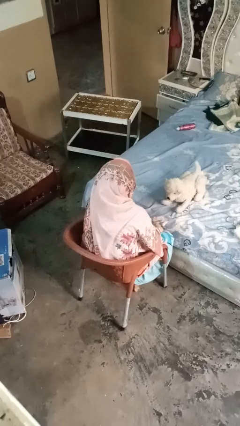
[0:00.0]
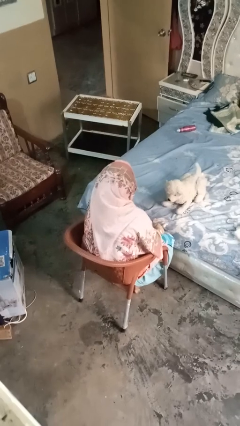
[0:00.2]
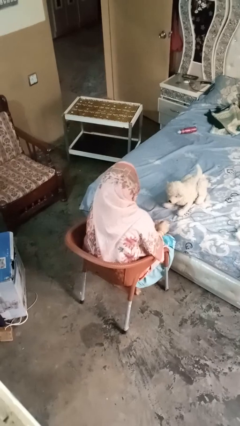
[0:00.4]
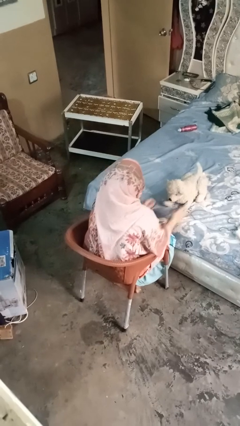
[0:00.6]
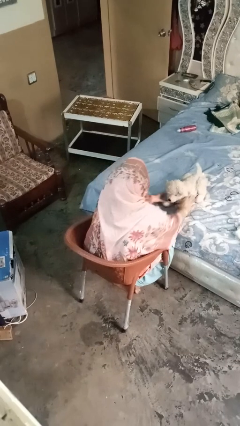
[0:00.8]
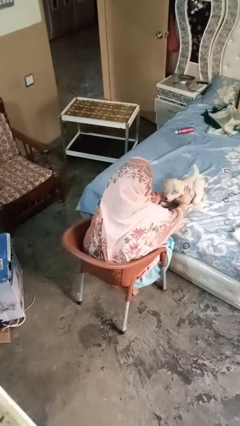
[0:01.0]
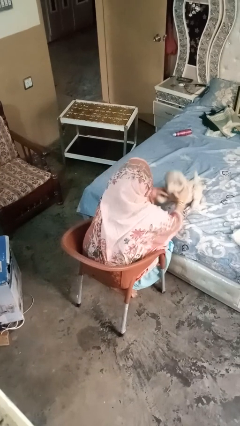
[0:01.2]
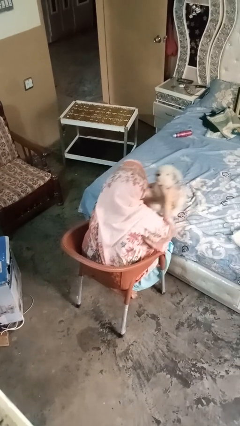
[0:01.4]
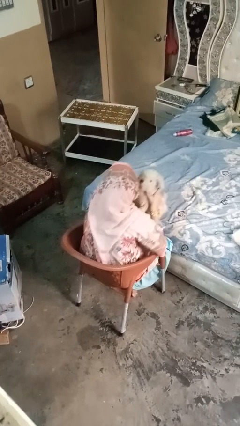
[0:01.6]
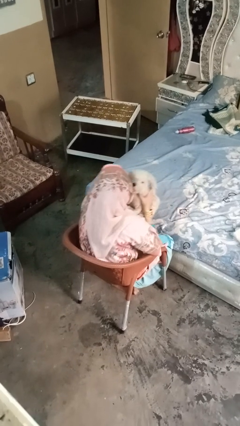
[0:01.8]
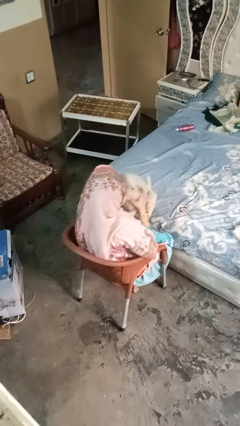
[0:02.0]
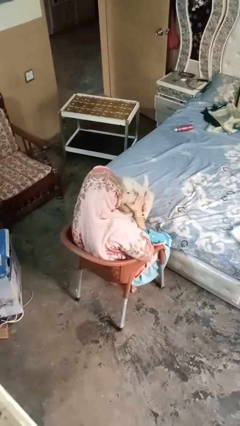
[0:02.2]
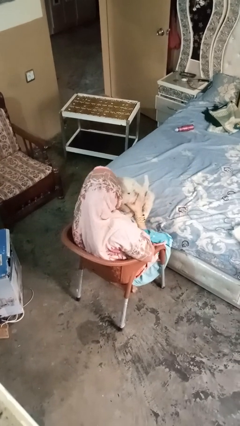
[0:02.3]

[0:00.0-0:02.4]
person hugs stuffed animal

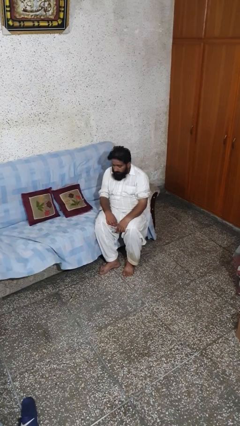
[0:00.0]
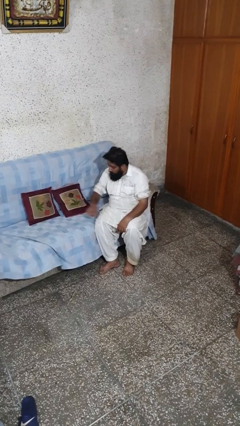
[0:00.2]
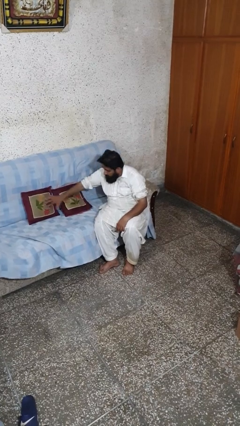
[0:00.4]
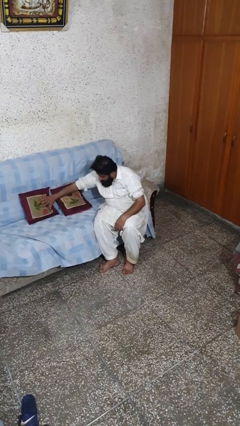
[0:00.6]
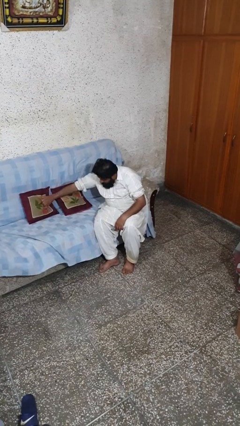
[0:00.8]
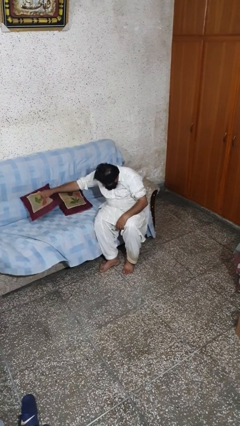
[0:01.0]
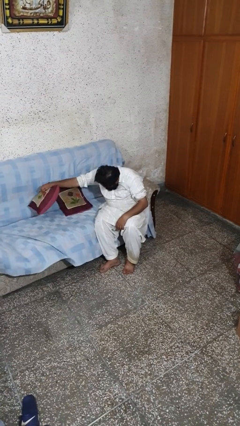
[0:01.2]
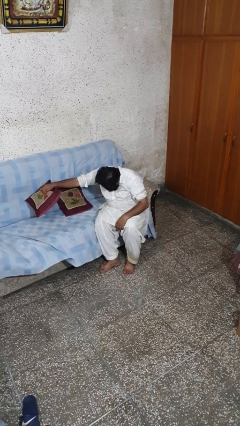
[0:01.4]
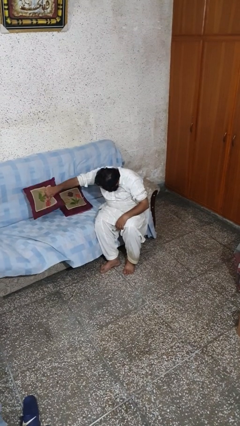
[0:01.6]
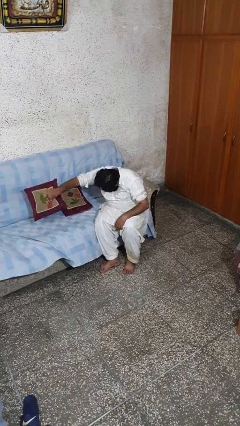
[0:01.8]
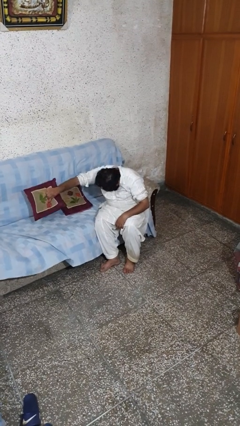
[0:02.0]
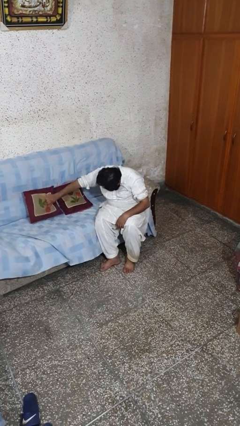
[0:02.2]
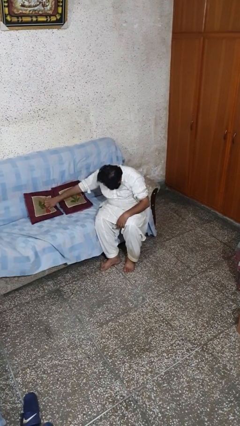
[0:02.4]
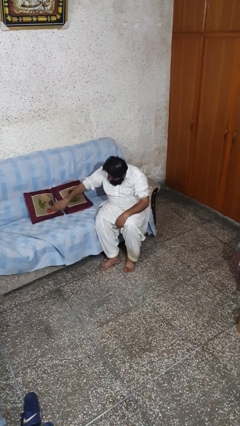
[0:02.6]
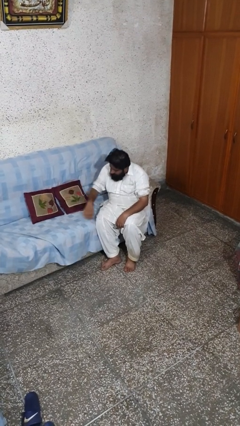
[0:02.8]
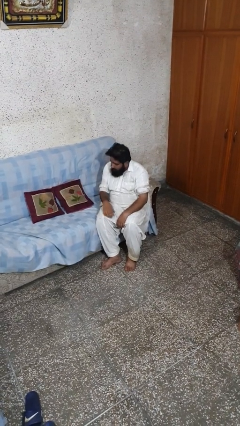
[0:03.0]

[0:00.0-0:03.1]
person searches in couch

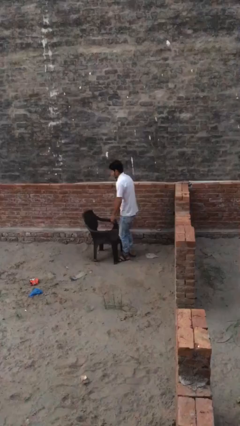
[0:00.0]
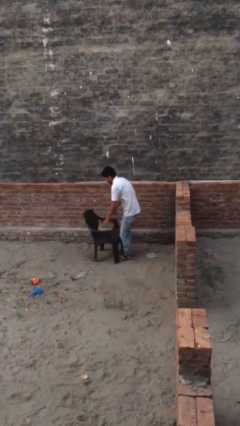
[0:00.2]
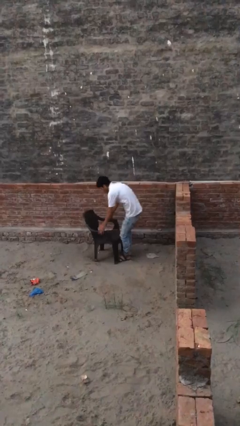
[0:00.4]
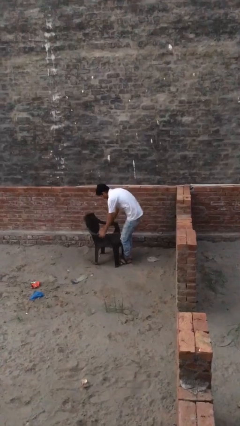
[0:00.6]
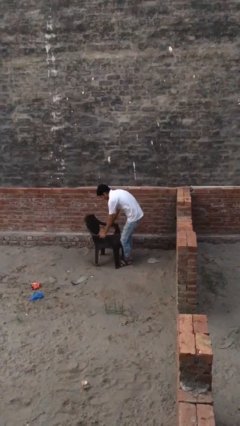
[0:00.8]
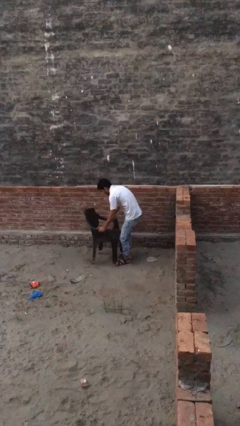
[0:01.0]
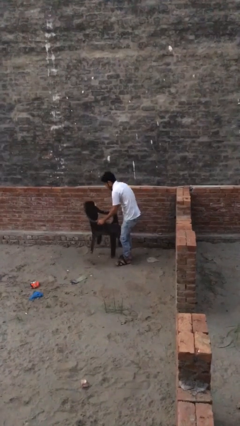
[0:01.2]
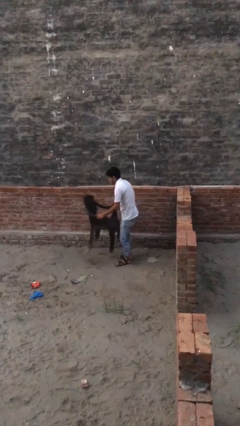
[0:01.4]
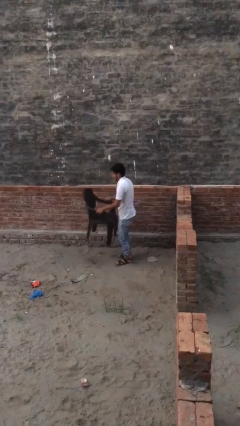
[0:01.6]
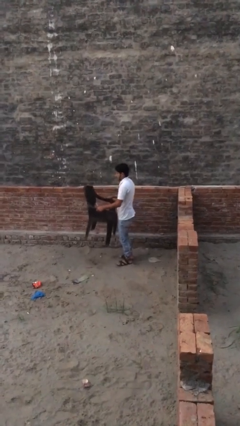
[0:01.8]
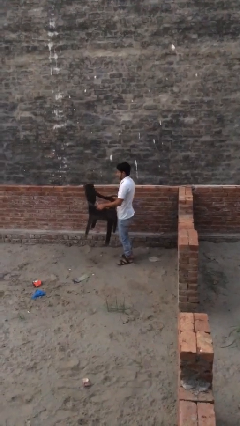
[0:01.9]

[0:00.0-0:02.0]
person picks up object from floor

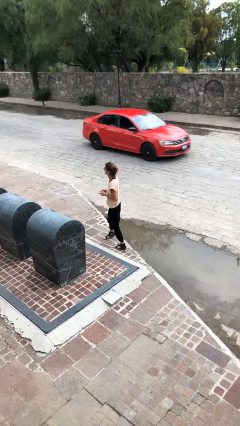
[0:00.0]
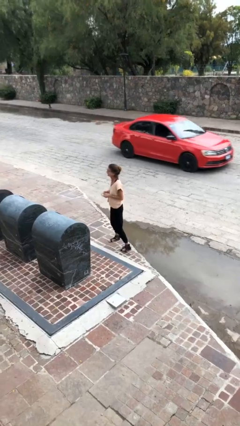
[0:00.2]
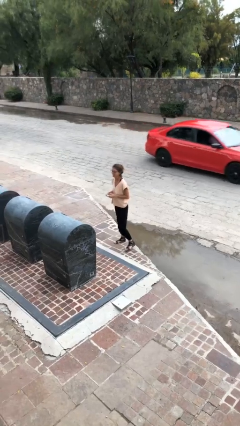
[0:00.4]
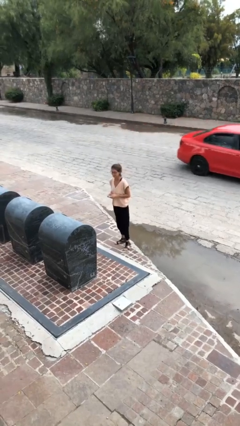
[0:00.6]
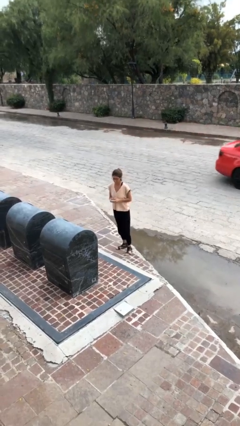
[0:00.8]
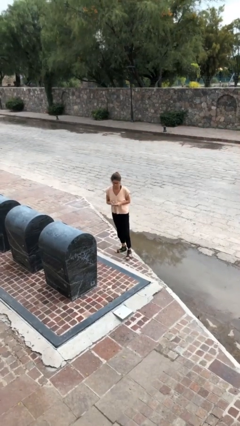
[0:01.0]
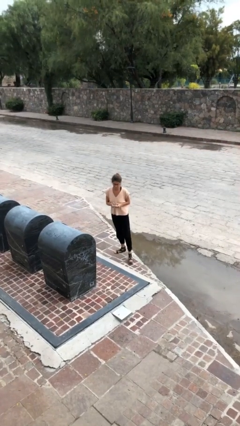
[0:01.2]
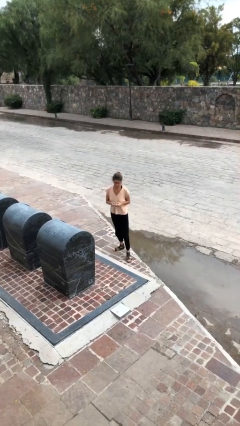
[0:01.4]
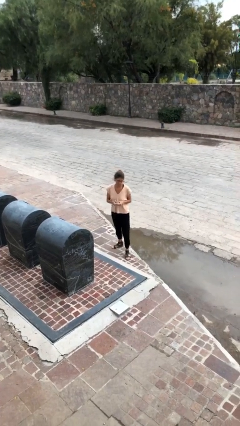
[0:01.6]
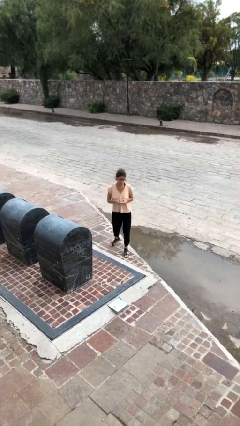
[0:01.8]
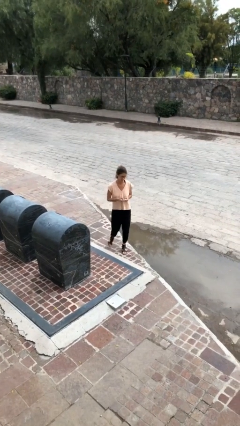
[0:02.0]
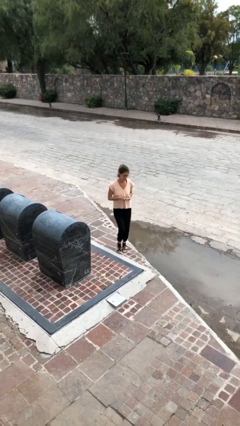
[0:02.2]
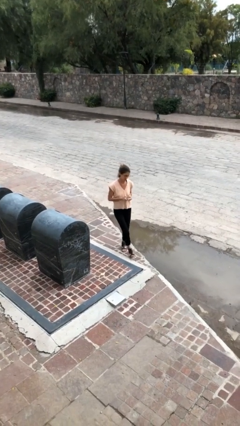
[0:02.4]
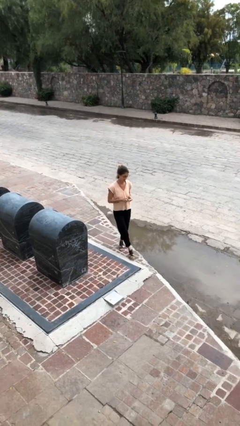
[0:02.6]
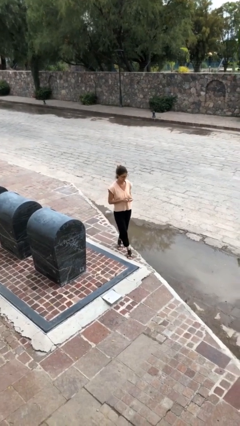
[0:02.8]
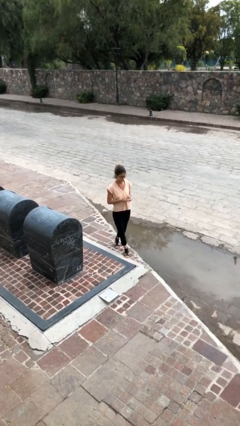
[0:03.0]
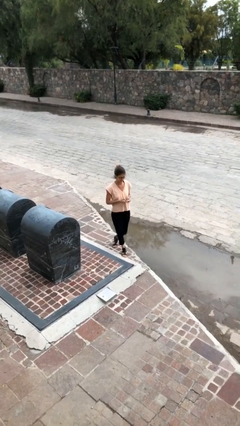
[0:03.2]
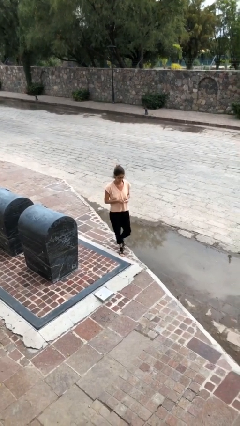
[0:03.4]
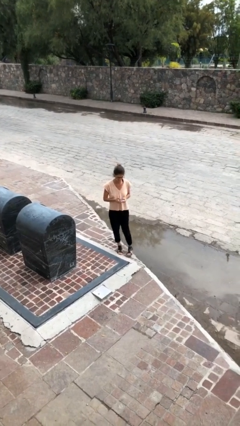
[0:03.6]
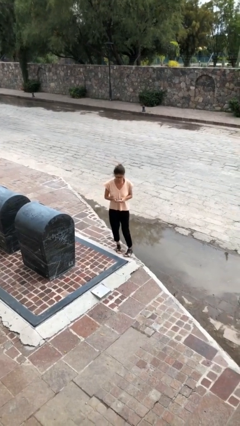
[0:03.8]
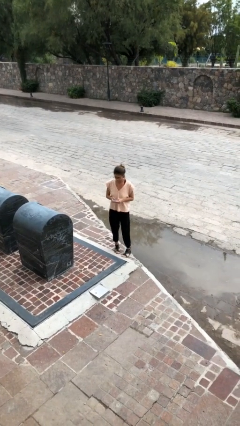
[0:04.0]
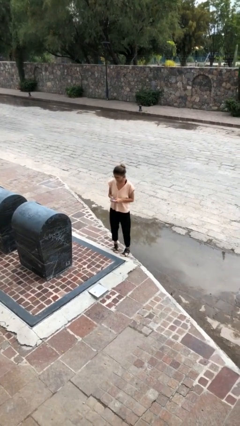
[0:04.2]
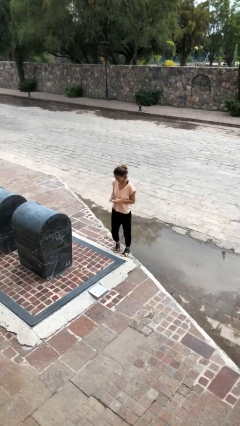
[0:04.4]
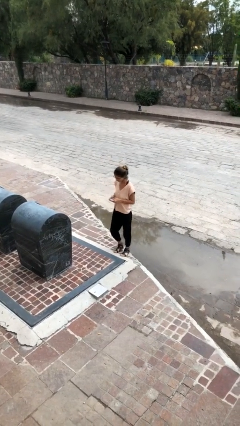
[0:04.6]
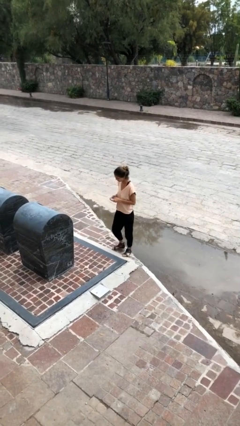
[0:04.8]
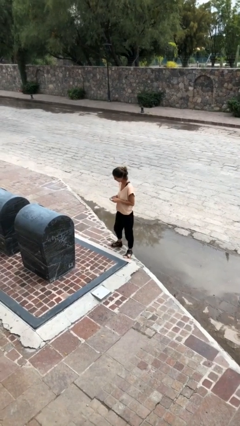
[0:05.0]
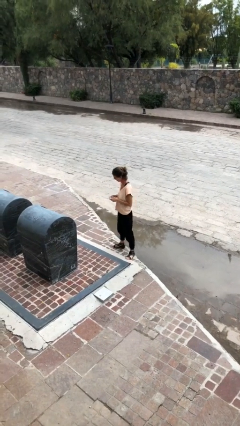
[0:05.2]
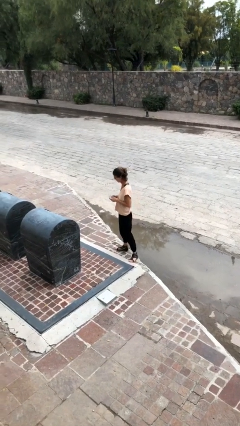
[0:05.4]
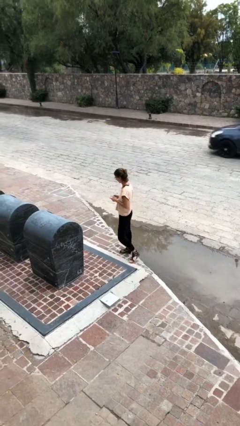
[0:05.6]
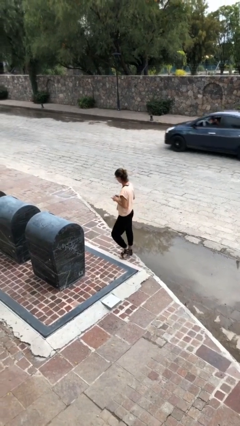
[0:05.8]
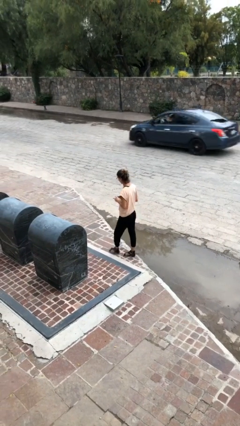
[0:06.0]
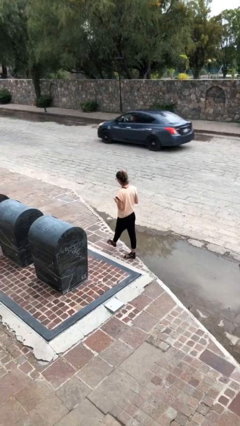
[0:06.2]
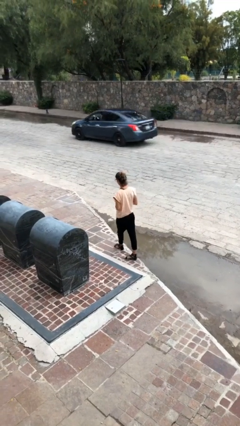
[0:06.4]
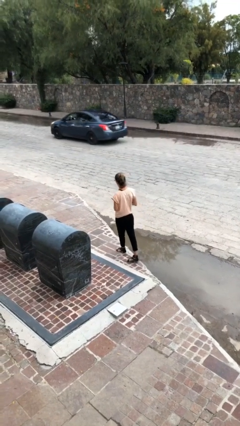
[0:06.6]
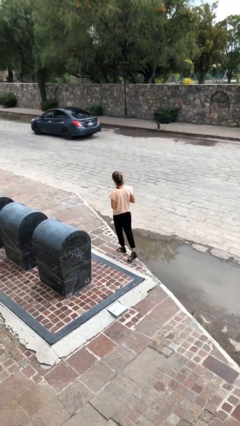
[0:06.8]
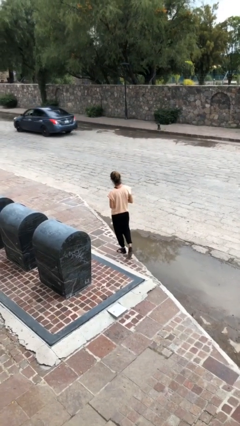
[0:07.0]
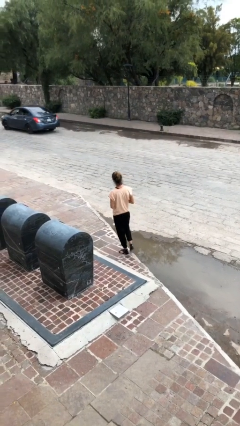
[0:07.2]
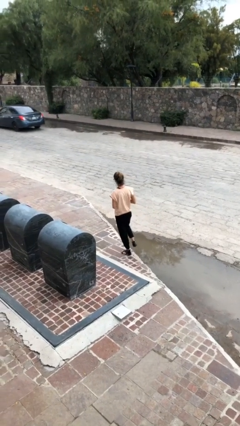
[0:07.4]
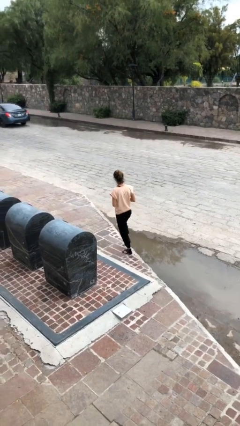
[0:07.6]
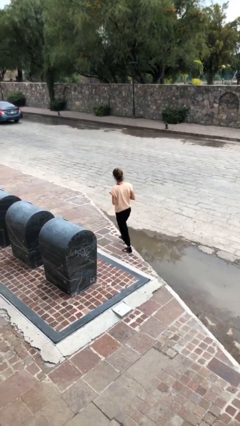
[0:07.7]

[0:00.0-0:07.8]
person texts on phone

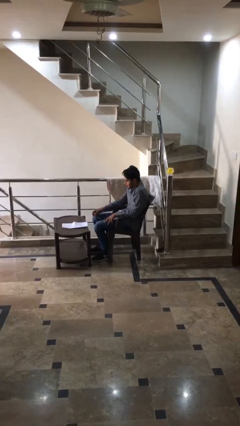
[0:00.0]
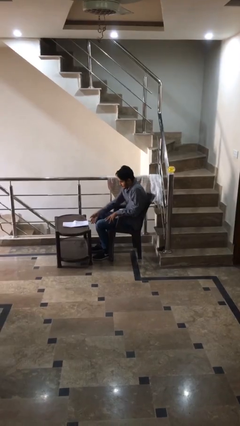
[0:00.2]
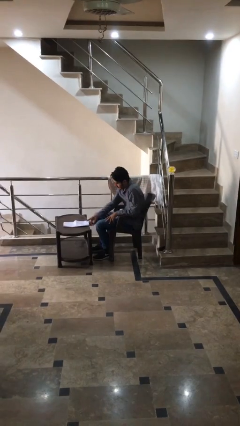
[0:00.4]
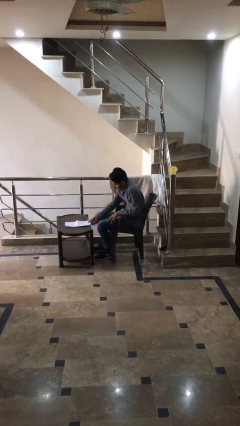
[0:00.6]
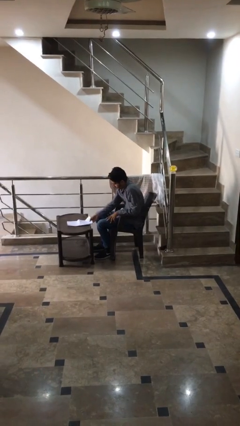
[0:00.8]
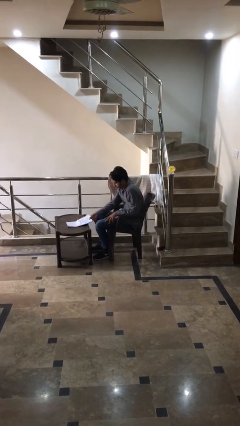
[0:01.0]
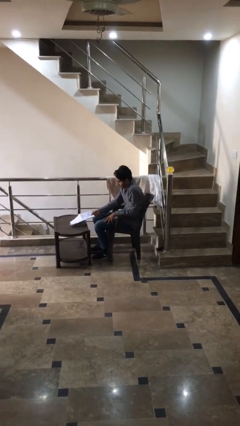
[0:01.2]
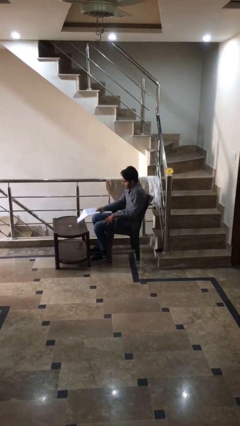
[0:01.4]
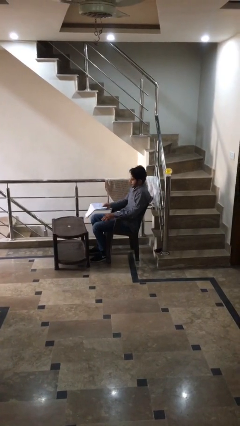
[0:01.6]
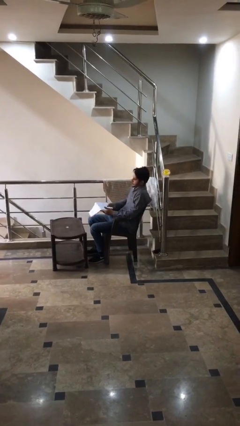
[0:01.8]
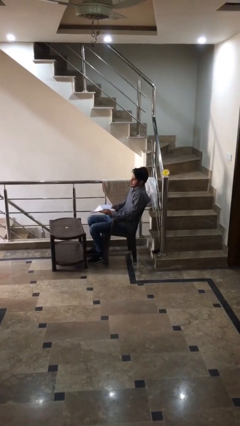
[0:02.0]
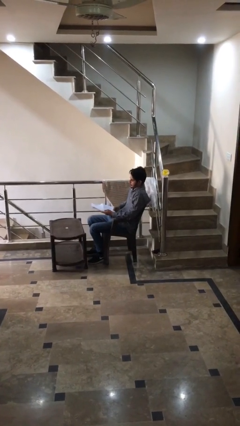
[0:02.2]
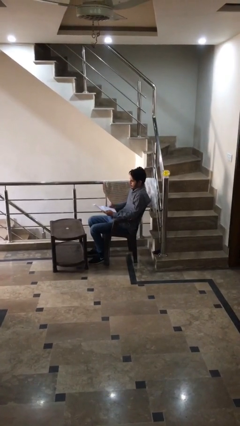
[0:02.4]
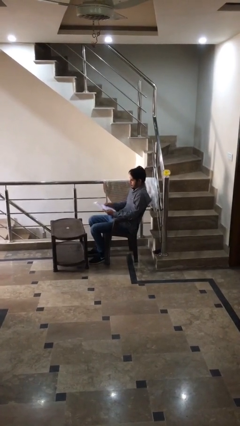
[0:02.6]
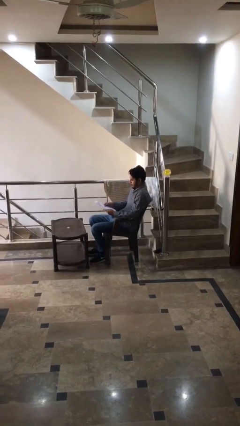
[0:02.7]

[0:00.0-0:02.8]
person picks up object from table

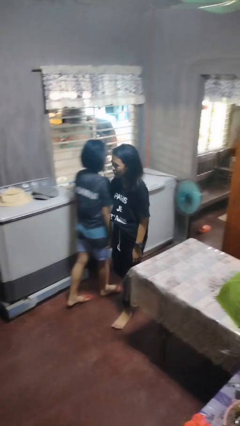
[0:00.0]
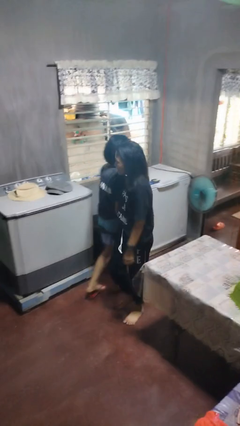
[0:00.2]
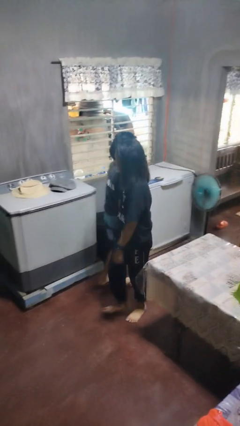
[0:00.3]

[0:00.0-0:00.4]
person bumps into person
